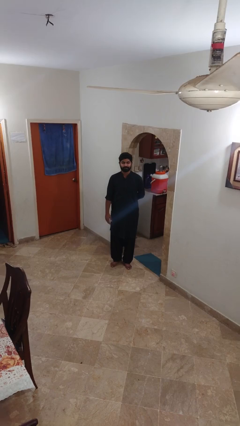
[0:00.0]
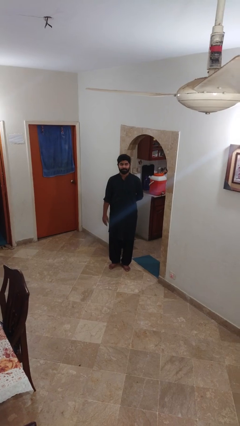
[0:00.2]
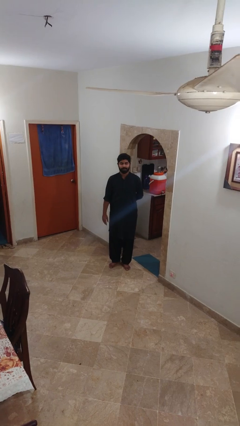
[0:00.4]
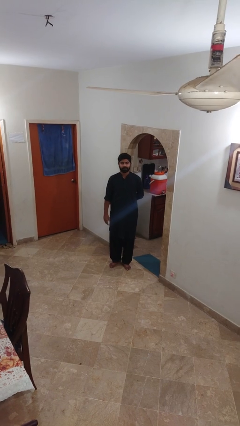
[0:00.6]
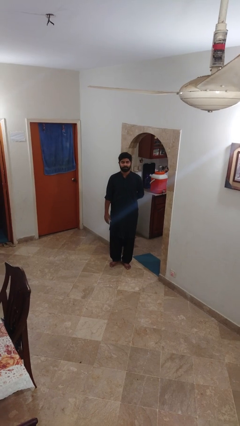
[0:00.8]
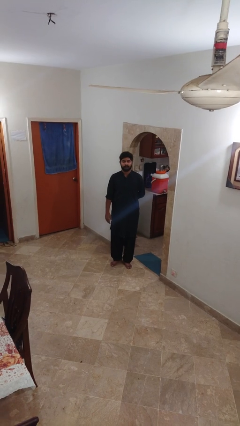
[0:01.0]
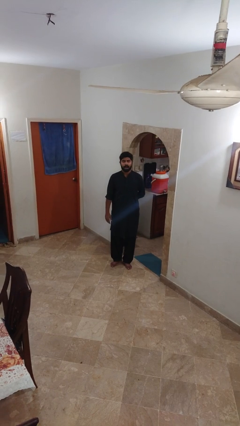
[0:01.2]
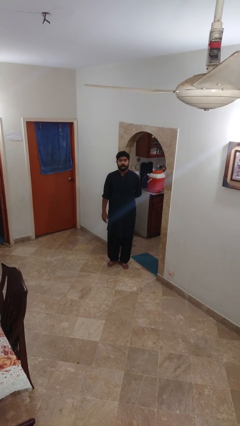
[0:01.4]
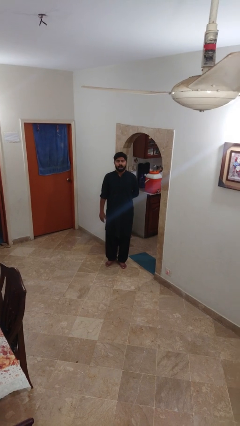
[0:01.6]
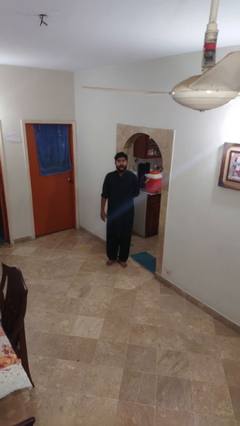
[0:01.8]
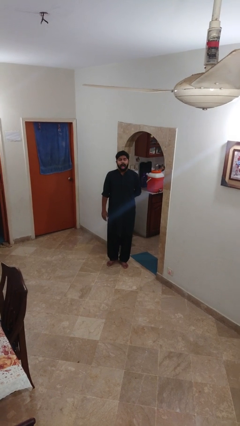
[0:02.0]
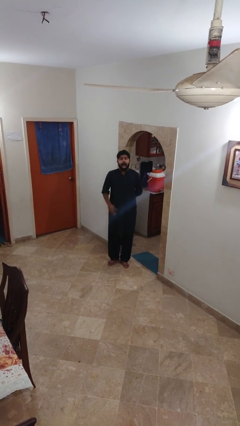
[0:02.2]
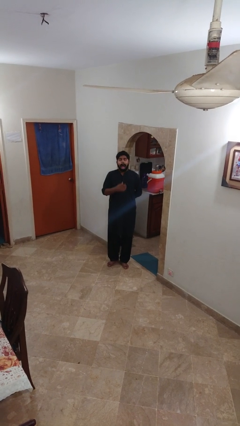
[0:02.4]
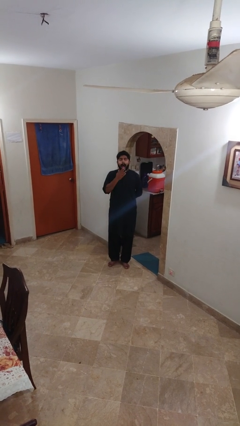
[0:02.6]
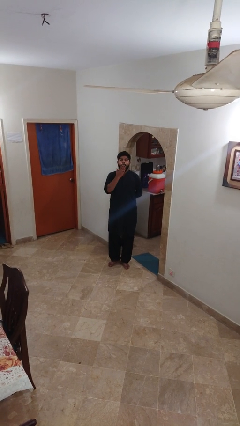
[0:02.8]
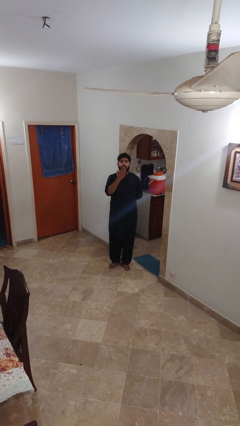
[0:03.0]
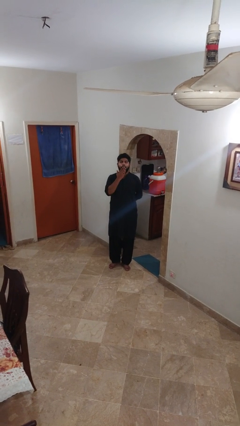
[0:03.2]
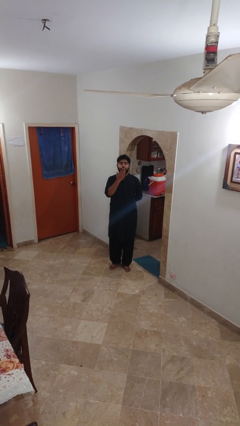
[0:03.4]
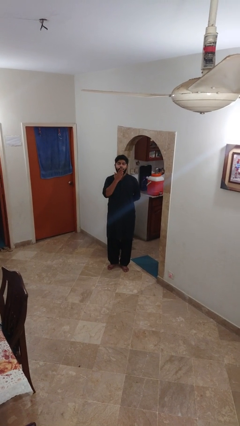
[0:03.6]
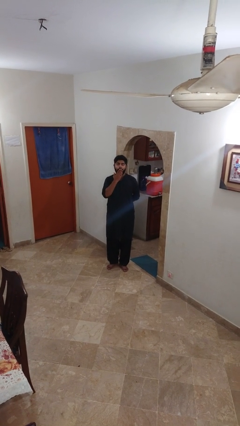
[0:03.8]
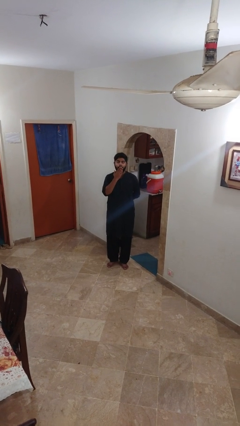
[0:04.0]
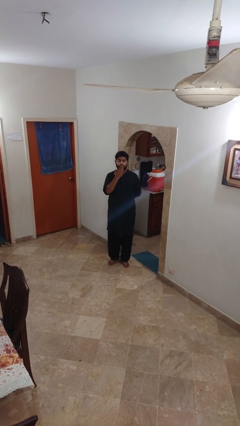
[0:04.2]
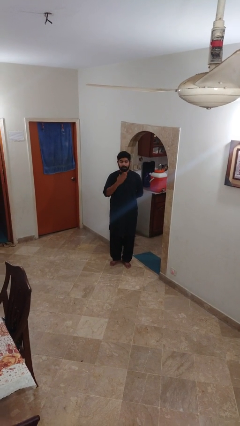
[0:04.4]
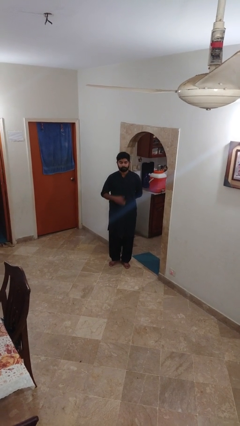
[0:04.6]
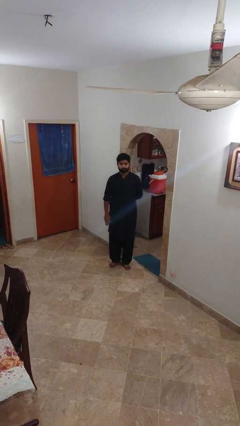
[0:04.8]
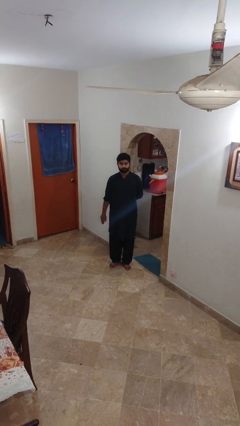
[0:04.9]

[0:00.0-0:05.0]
person yawns

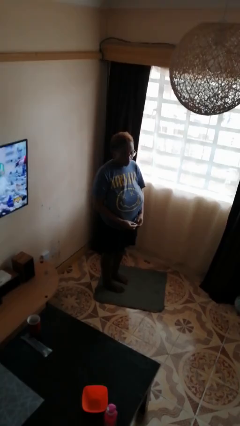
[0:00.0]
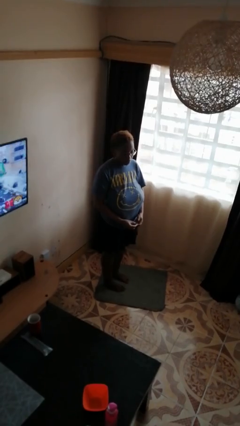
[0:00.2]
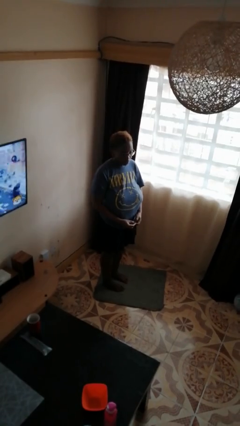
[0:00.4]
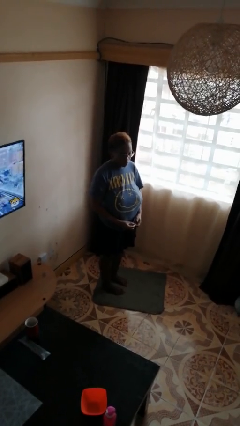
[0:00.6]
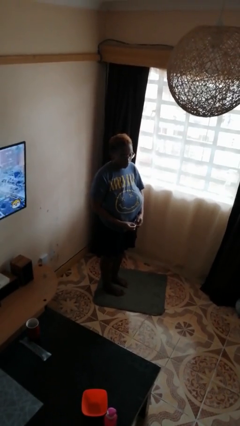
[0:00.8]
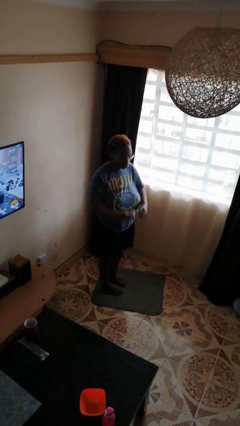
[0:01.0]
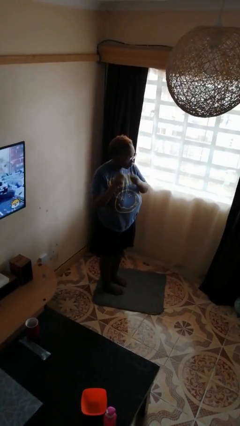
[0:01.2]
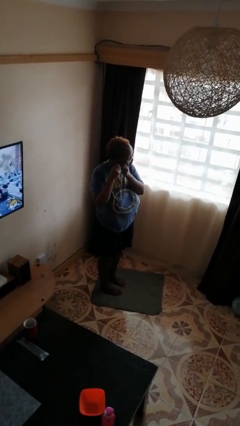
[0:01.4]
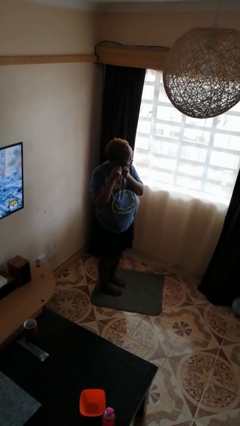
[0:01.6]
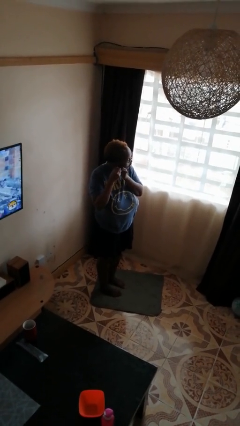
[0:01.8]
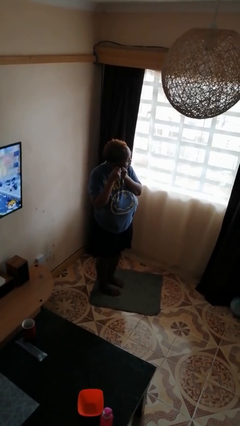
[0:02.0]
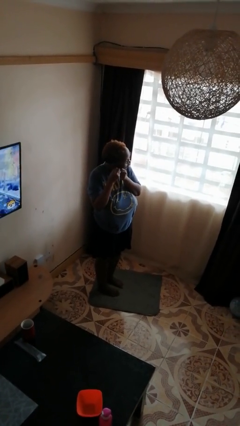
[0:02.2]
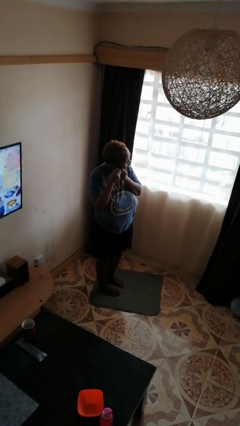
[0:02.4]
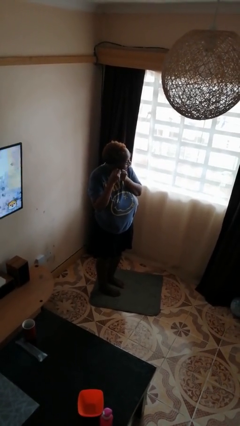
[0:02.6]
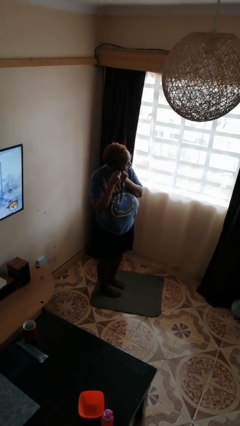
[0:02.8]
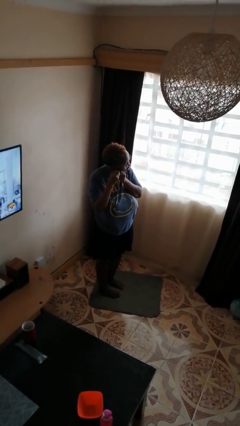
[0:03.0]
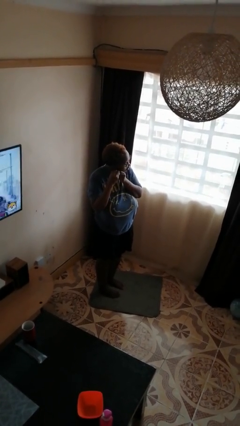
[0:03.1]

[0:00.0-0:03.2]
person puts on earrings

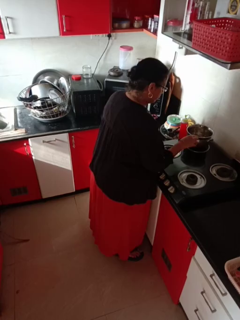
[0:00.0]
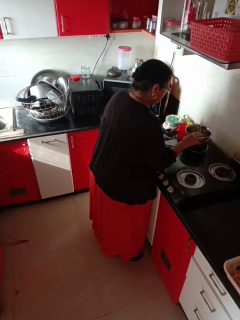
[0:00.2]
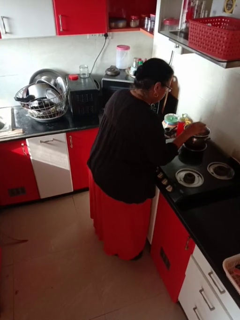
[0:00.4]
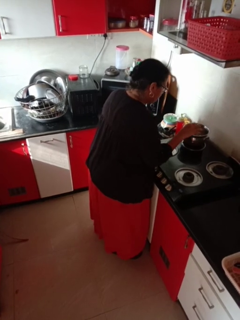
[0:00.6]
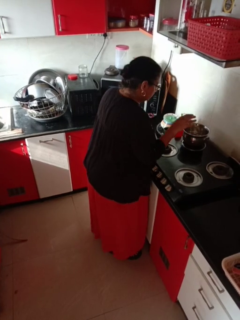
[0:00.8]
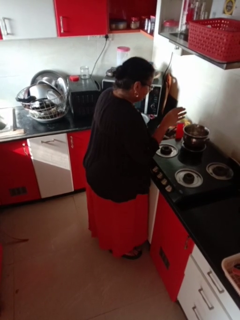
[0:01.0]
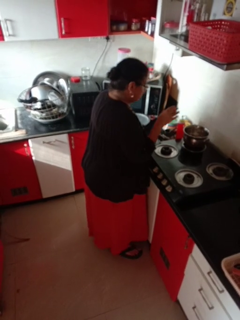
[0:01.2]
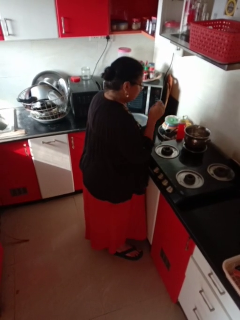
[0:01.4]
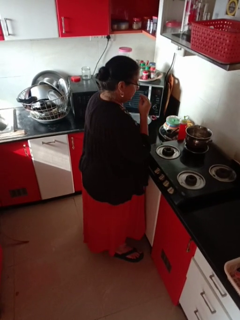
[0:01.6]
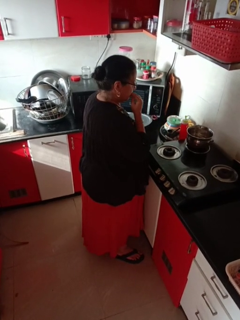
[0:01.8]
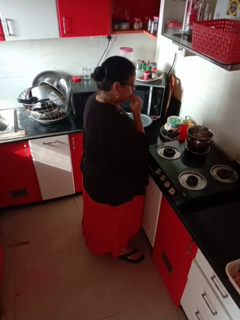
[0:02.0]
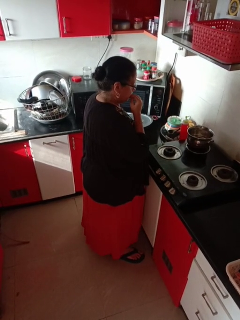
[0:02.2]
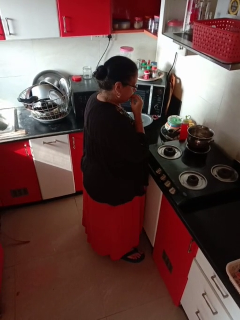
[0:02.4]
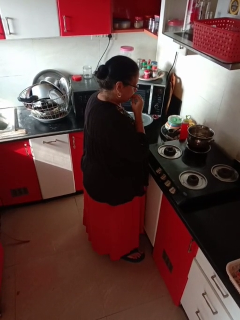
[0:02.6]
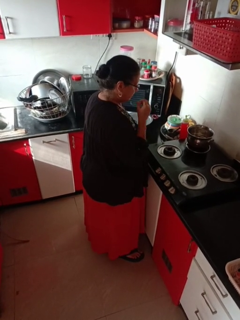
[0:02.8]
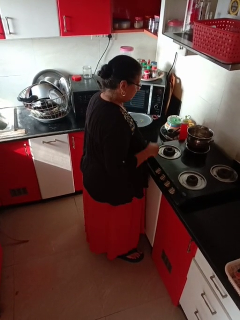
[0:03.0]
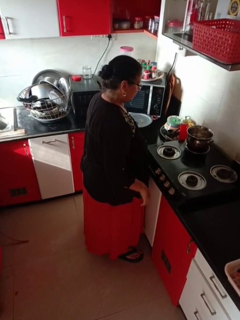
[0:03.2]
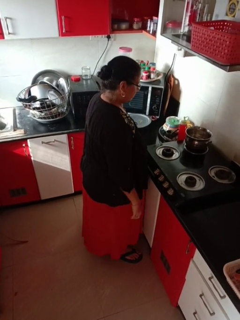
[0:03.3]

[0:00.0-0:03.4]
person burns hand

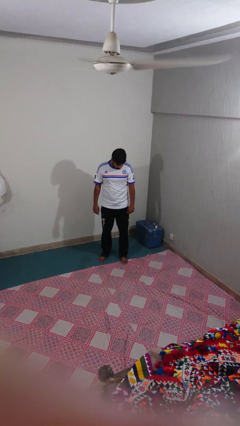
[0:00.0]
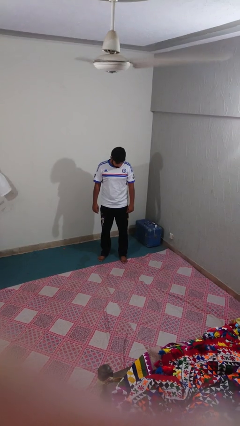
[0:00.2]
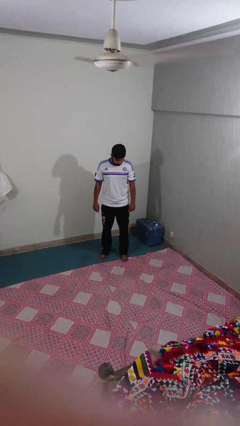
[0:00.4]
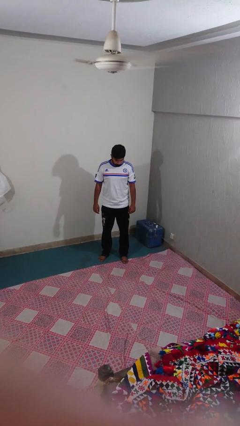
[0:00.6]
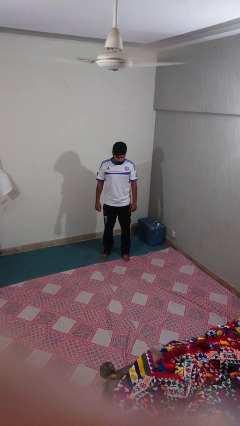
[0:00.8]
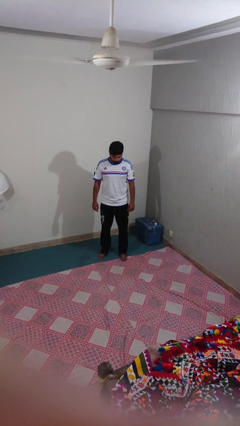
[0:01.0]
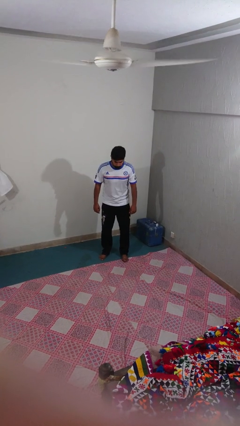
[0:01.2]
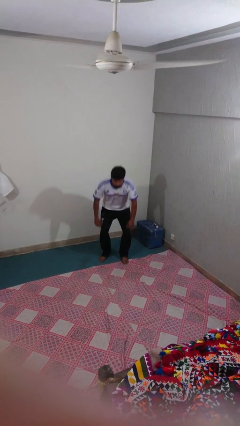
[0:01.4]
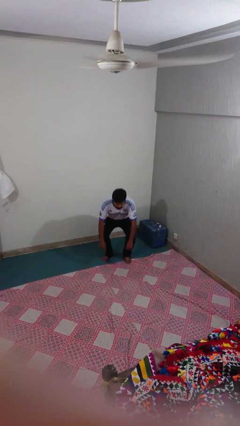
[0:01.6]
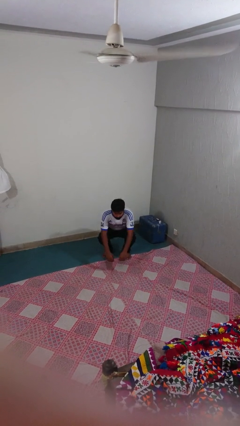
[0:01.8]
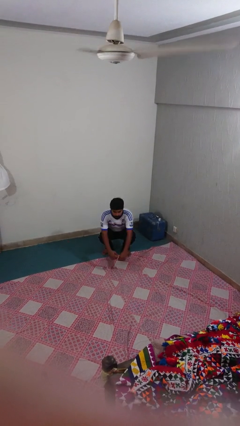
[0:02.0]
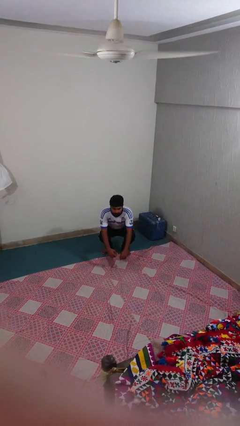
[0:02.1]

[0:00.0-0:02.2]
person squats

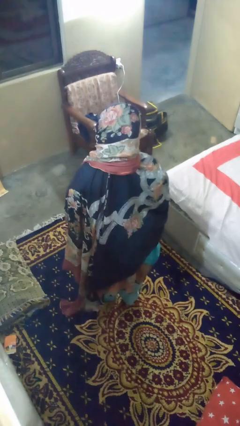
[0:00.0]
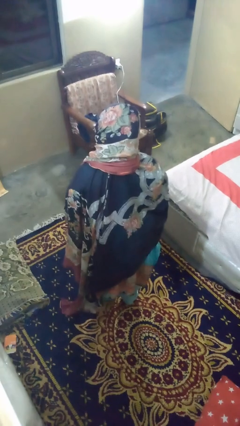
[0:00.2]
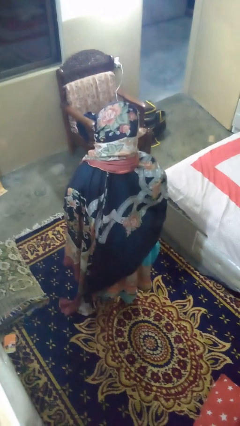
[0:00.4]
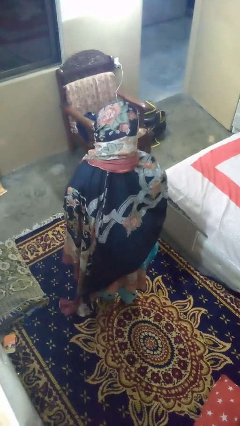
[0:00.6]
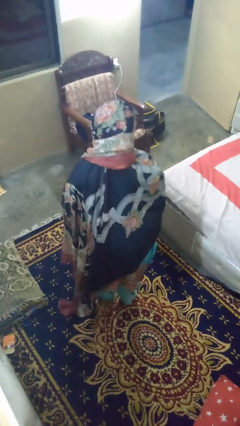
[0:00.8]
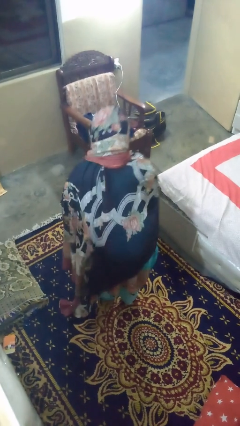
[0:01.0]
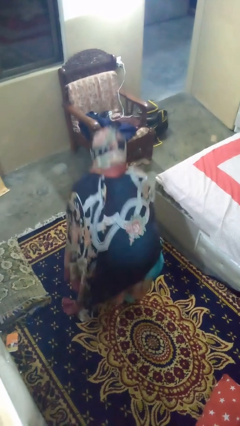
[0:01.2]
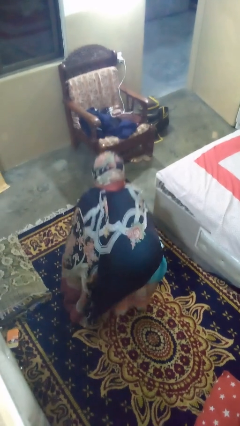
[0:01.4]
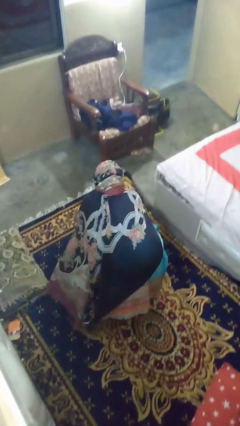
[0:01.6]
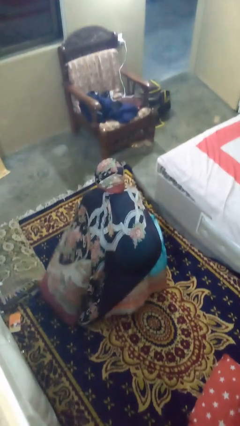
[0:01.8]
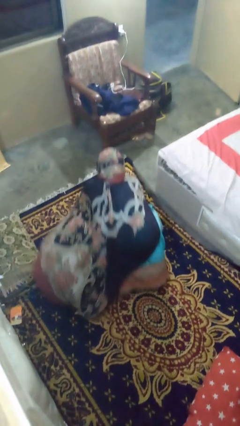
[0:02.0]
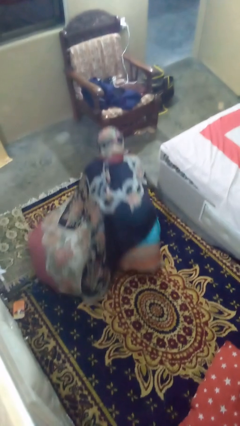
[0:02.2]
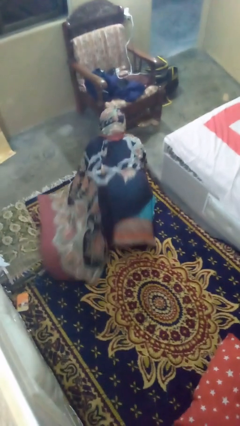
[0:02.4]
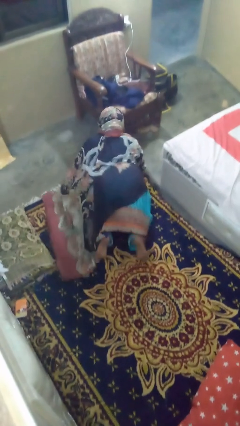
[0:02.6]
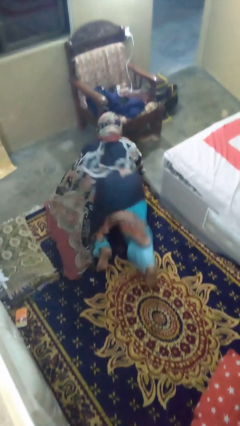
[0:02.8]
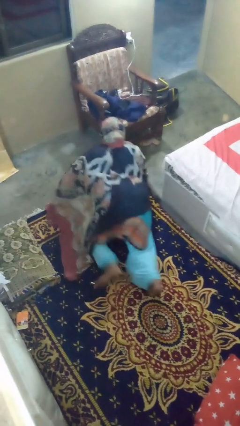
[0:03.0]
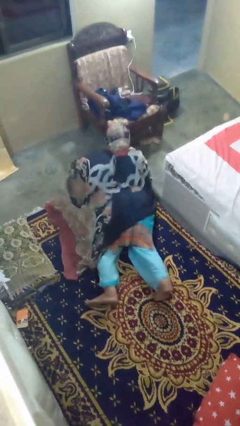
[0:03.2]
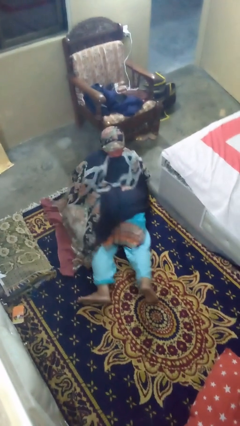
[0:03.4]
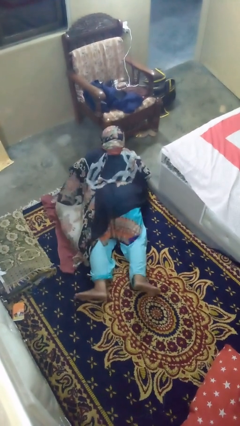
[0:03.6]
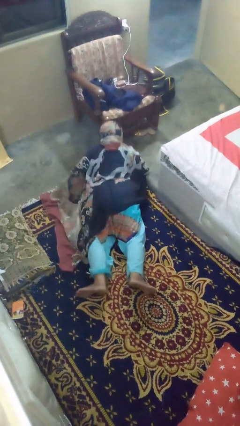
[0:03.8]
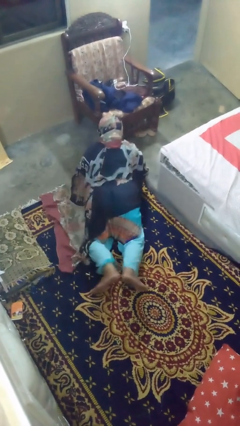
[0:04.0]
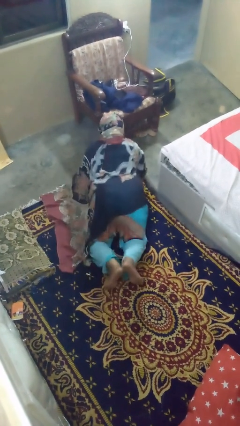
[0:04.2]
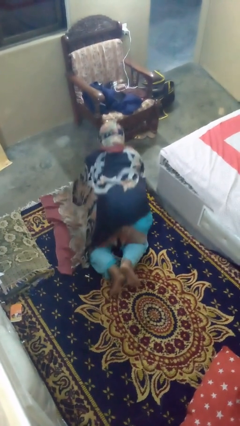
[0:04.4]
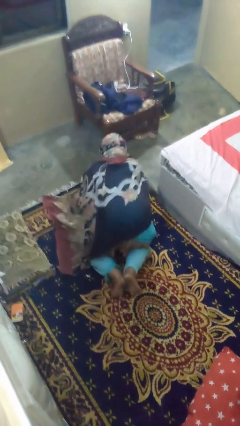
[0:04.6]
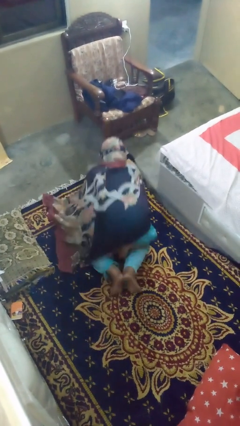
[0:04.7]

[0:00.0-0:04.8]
person exercises with pushup
